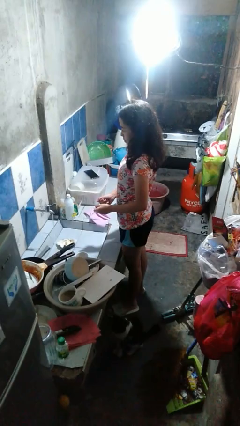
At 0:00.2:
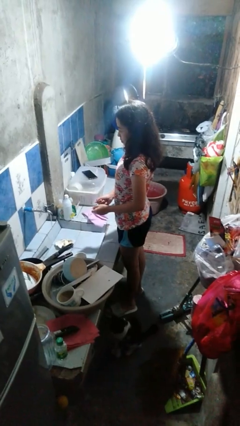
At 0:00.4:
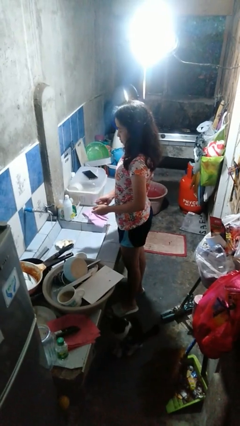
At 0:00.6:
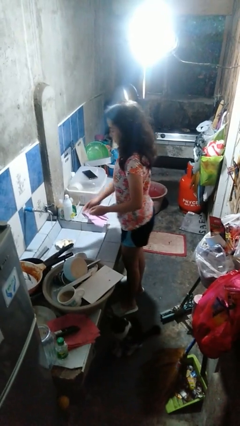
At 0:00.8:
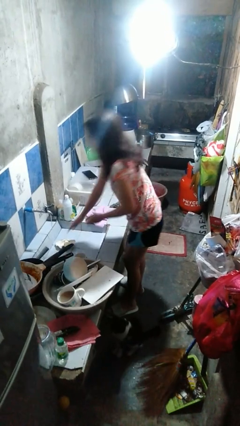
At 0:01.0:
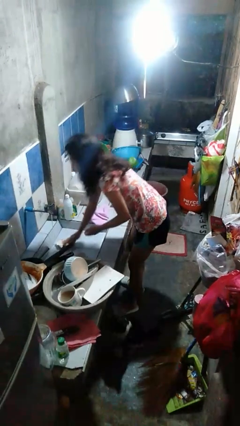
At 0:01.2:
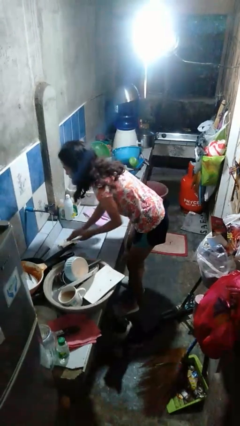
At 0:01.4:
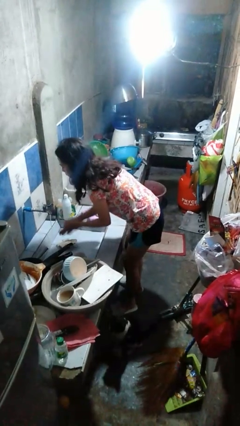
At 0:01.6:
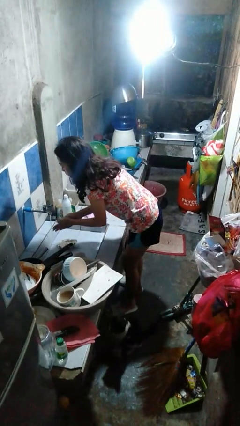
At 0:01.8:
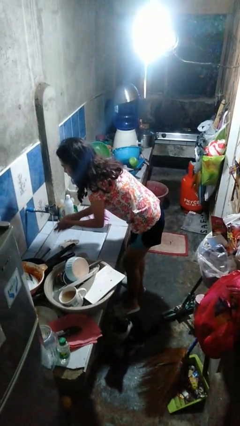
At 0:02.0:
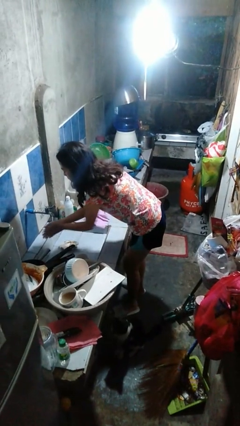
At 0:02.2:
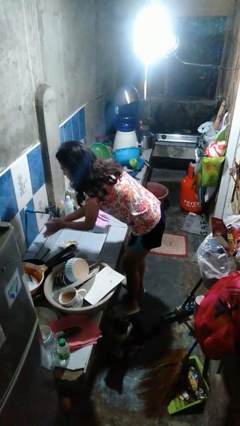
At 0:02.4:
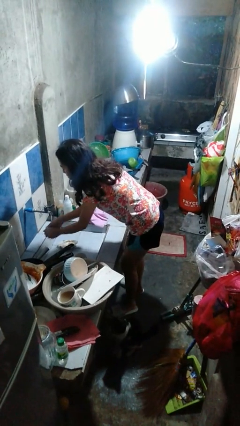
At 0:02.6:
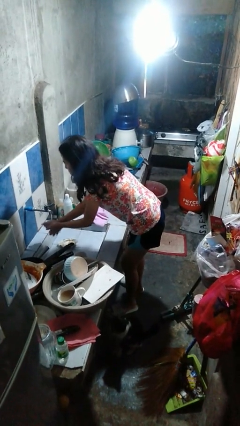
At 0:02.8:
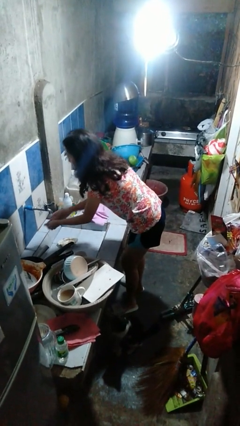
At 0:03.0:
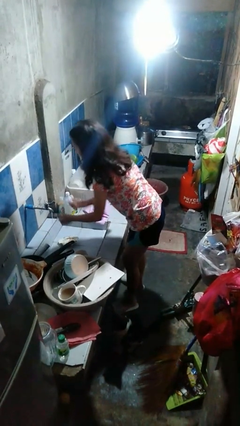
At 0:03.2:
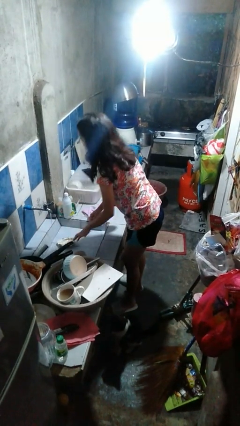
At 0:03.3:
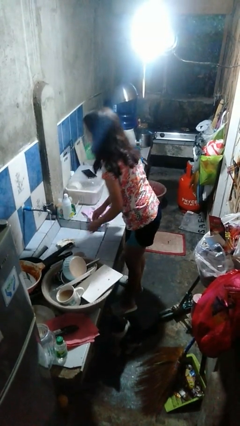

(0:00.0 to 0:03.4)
person washes hands

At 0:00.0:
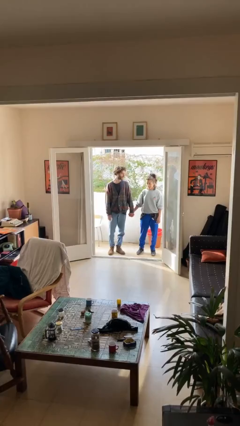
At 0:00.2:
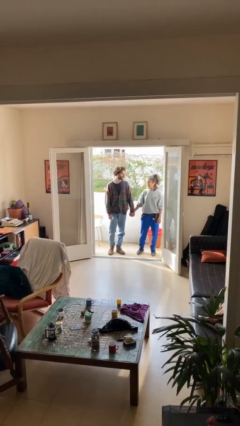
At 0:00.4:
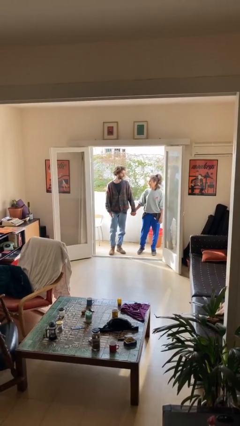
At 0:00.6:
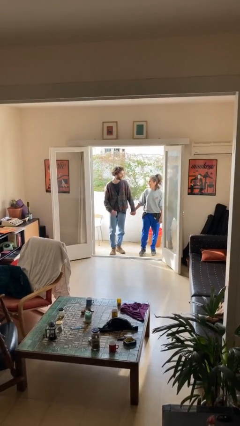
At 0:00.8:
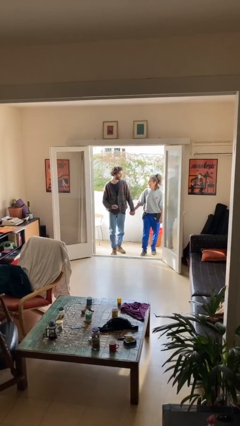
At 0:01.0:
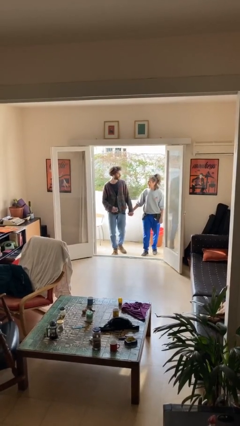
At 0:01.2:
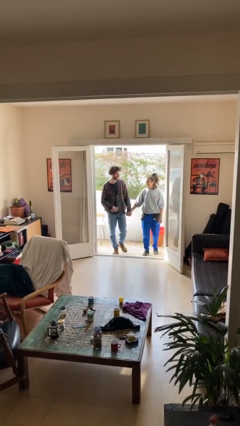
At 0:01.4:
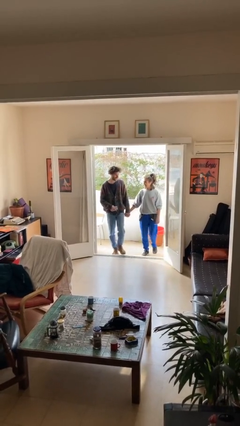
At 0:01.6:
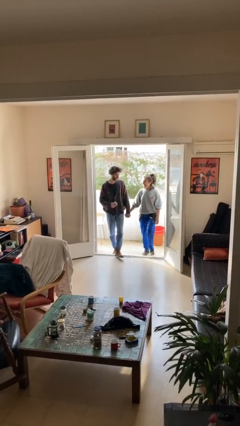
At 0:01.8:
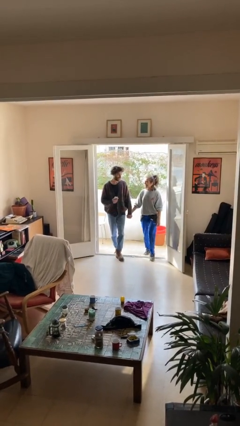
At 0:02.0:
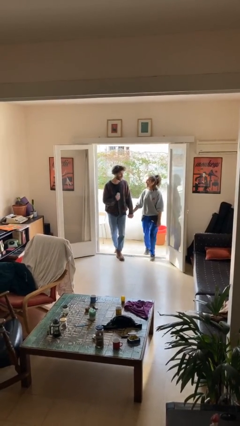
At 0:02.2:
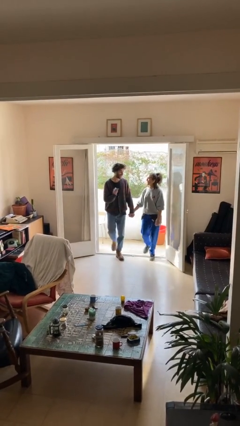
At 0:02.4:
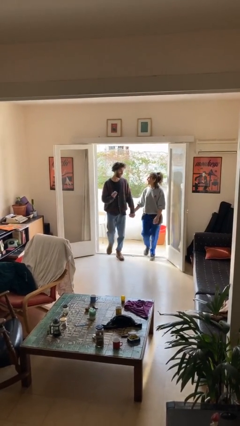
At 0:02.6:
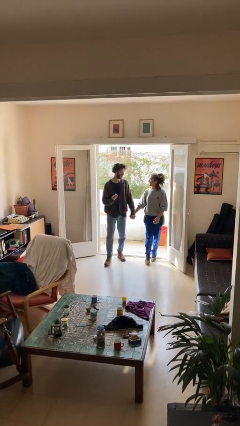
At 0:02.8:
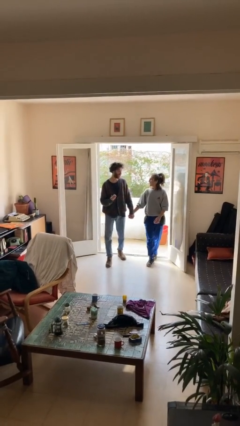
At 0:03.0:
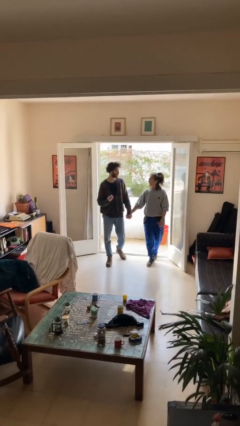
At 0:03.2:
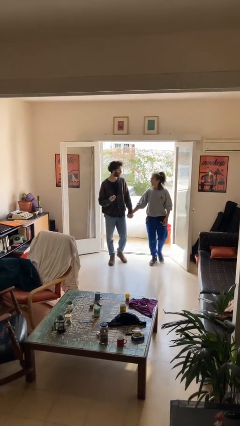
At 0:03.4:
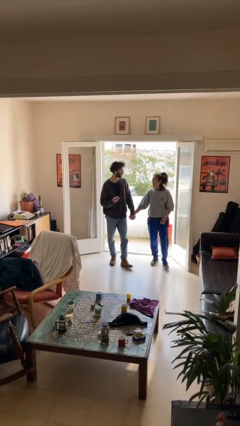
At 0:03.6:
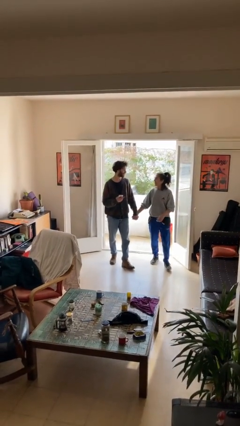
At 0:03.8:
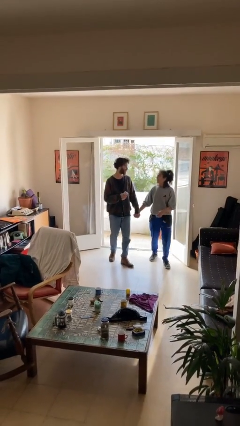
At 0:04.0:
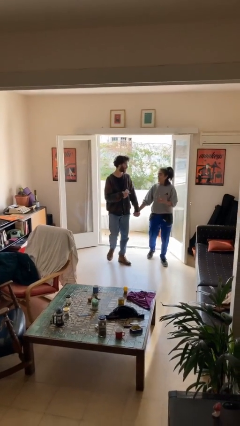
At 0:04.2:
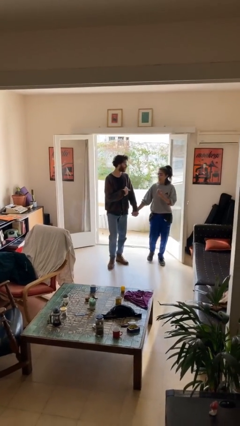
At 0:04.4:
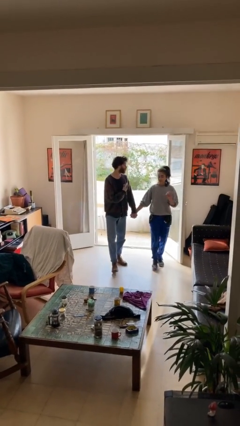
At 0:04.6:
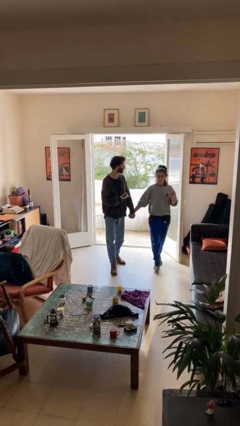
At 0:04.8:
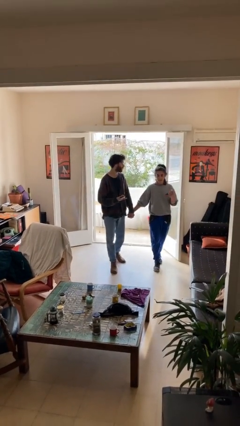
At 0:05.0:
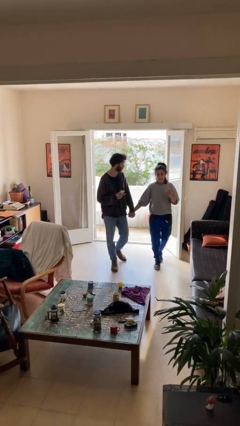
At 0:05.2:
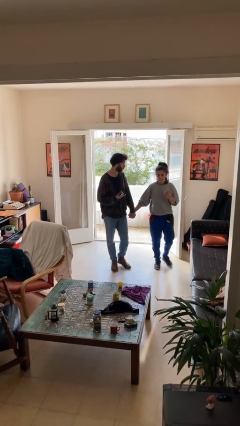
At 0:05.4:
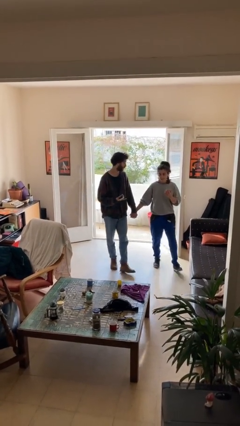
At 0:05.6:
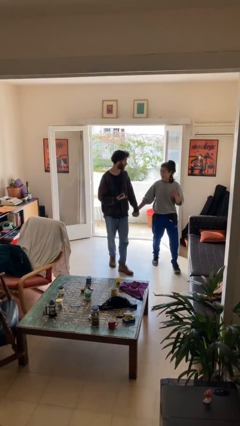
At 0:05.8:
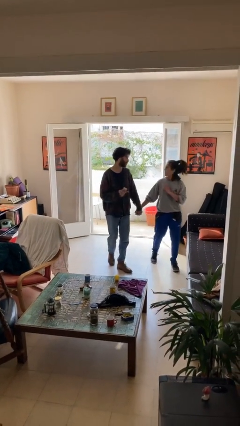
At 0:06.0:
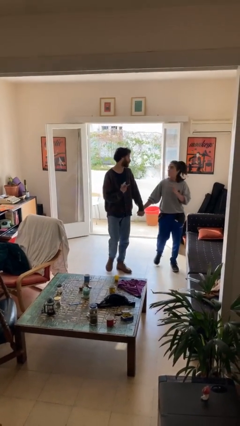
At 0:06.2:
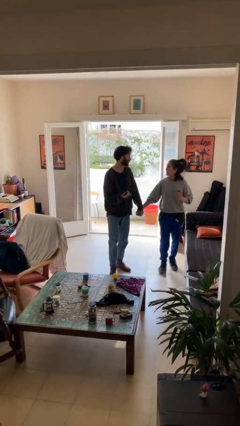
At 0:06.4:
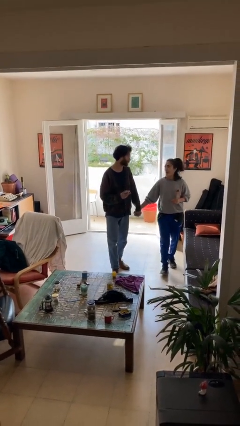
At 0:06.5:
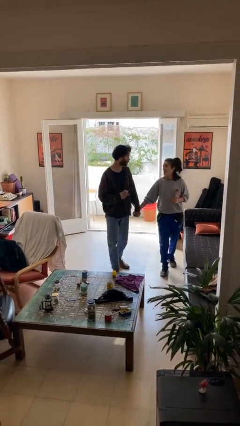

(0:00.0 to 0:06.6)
person holds hand

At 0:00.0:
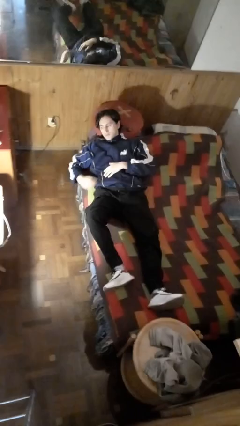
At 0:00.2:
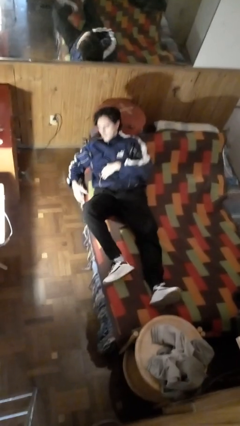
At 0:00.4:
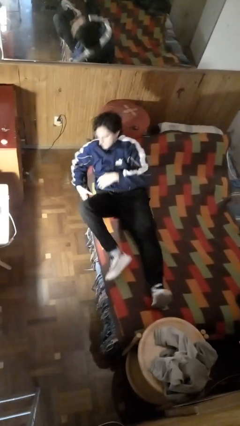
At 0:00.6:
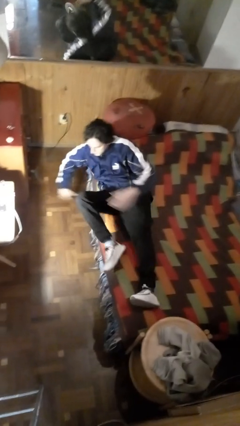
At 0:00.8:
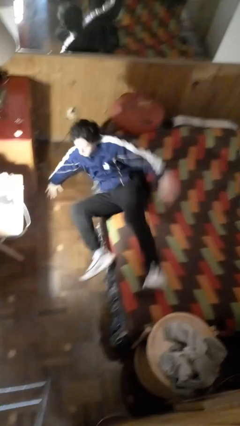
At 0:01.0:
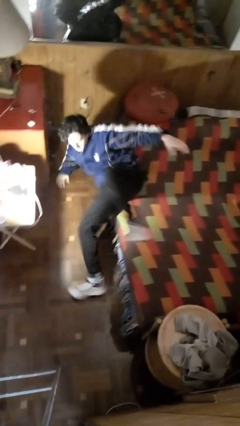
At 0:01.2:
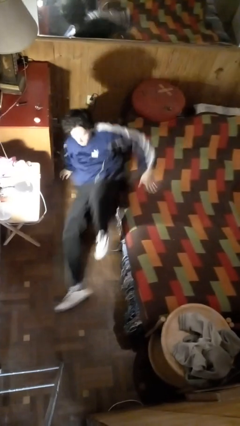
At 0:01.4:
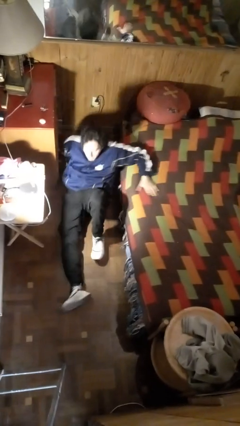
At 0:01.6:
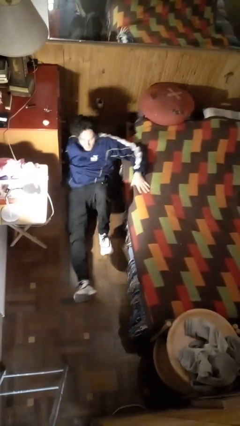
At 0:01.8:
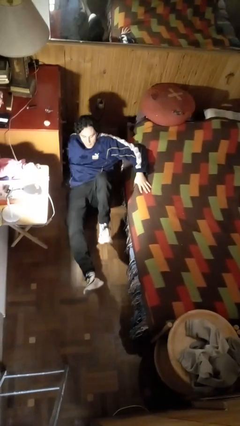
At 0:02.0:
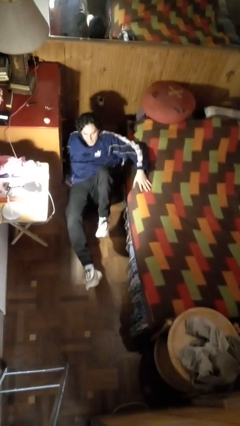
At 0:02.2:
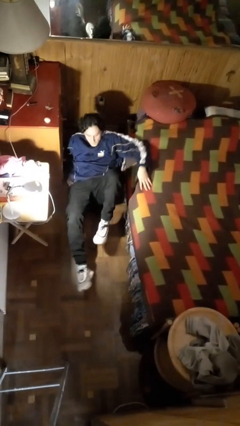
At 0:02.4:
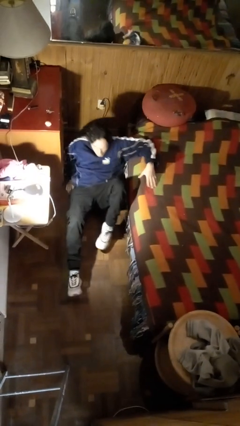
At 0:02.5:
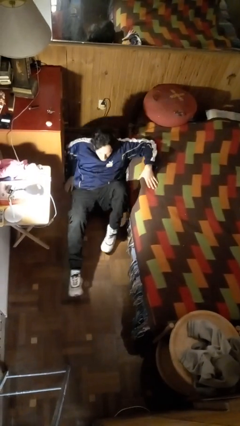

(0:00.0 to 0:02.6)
person falls from bed

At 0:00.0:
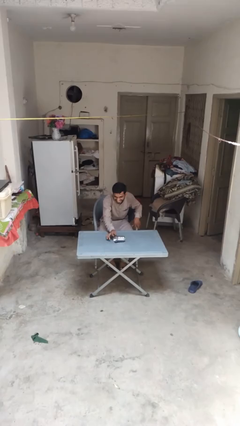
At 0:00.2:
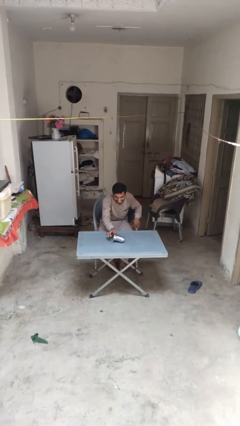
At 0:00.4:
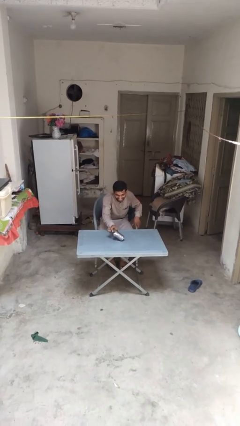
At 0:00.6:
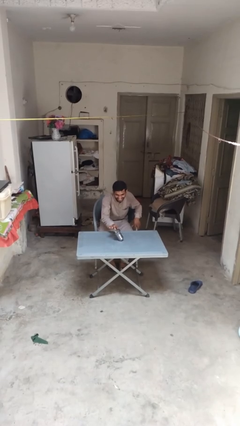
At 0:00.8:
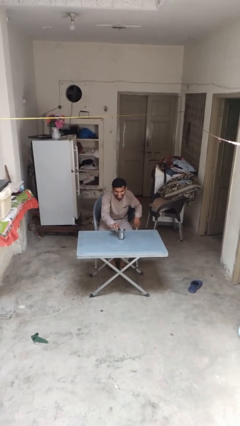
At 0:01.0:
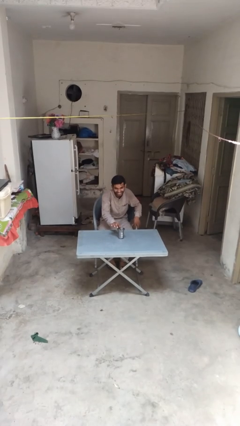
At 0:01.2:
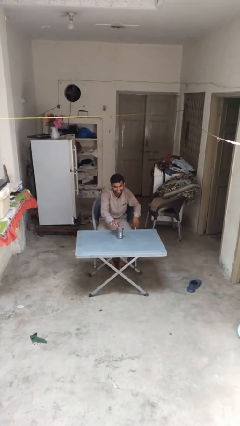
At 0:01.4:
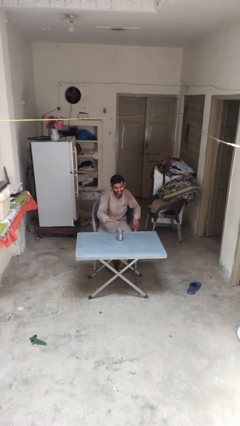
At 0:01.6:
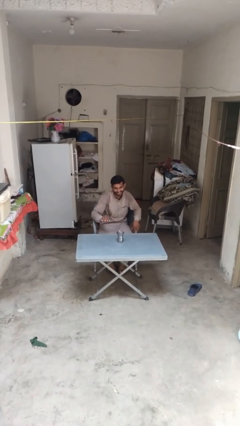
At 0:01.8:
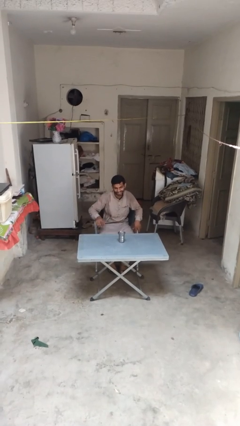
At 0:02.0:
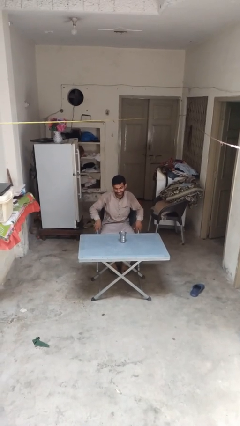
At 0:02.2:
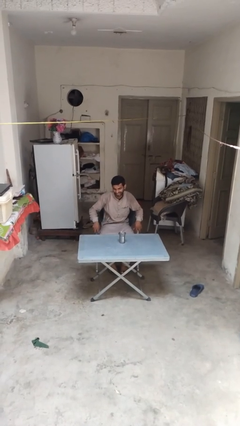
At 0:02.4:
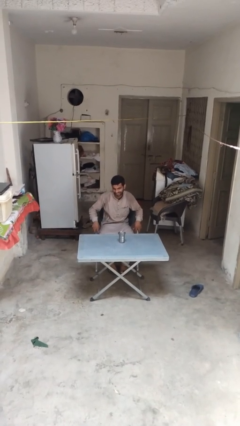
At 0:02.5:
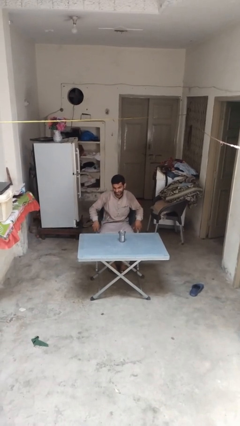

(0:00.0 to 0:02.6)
person sets upright glass

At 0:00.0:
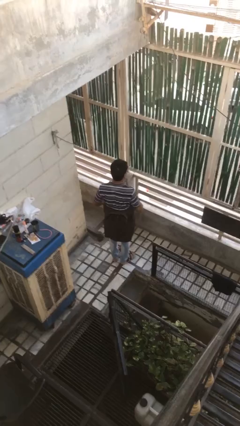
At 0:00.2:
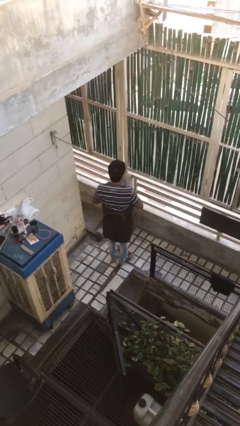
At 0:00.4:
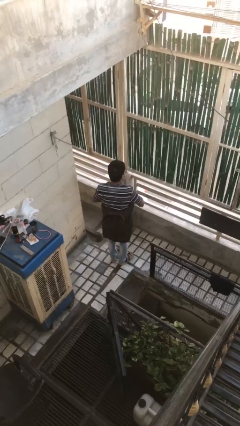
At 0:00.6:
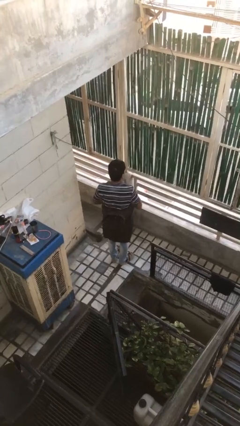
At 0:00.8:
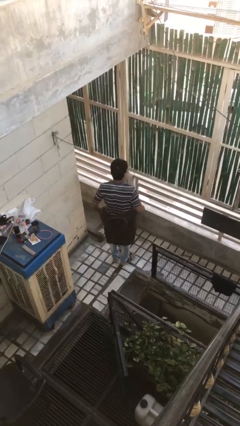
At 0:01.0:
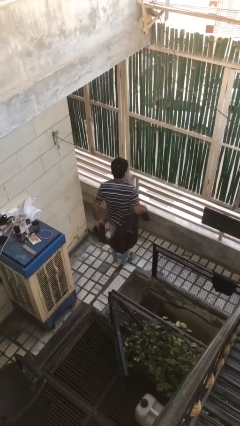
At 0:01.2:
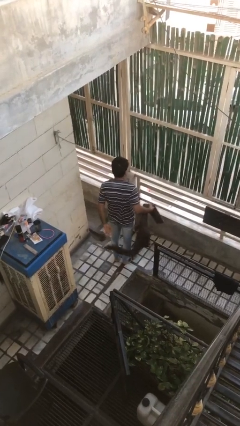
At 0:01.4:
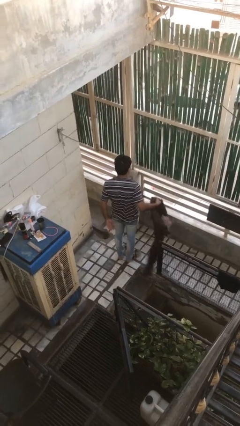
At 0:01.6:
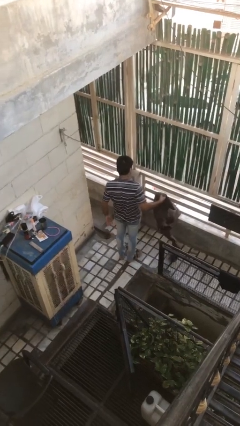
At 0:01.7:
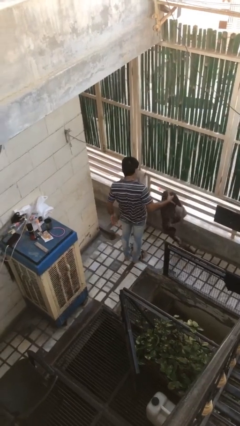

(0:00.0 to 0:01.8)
person unties jacket around waist

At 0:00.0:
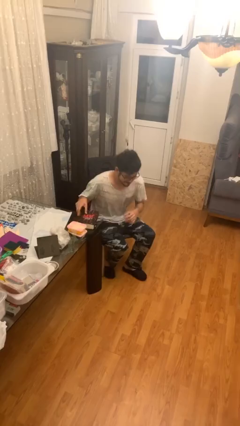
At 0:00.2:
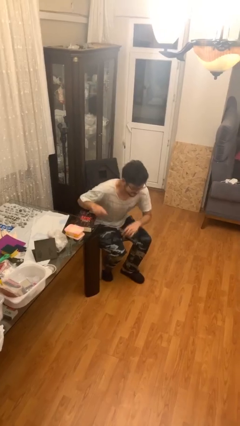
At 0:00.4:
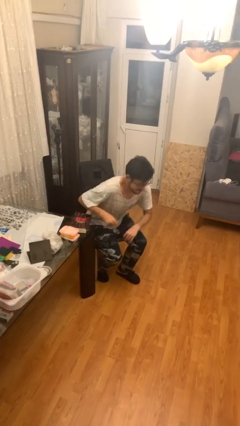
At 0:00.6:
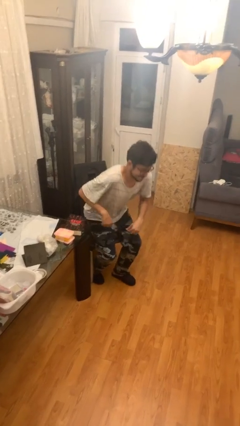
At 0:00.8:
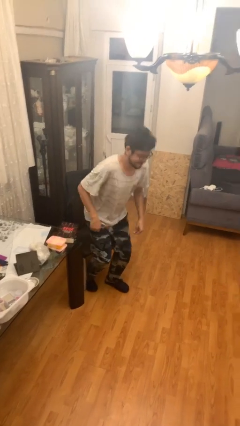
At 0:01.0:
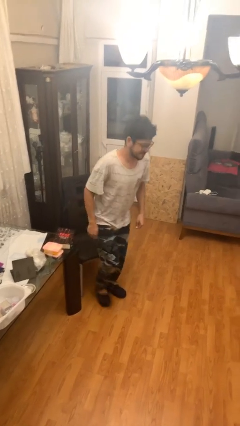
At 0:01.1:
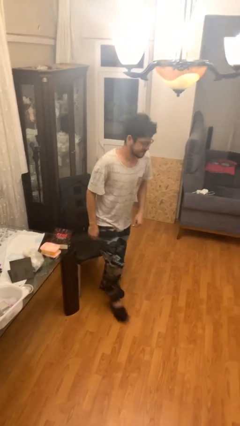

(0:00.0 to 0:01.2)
person stands up
